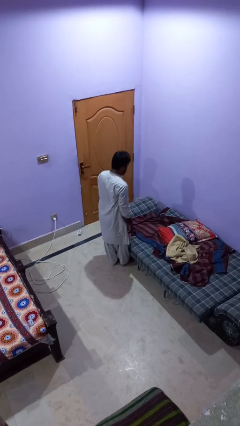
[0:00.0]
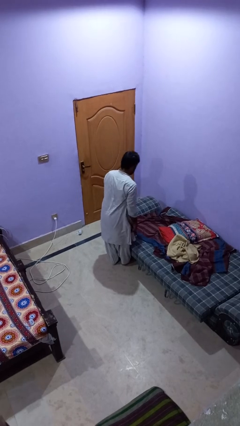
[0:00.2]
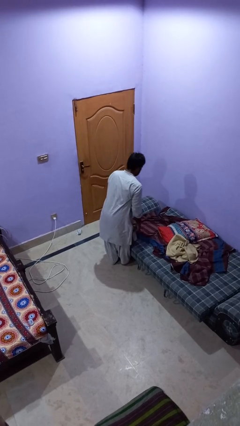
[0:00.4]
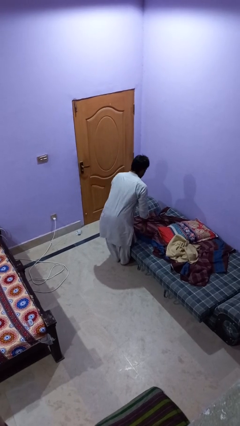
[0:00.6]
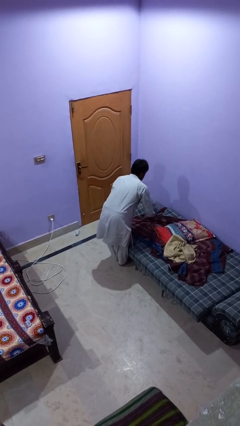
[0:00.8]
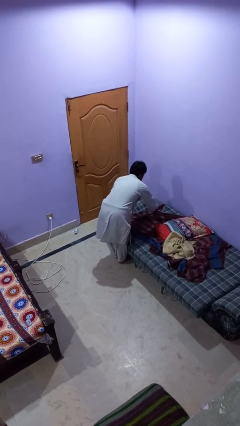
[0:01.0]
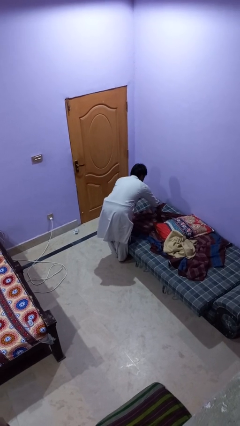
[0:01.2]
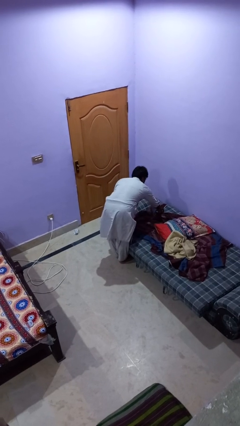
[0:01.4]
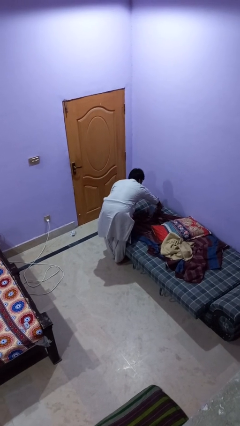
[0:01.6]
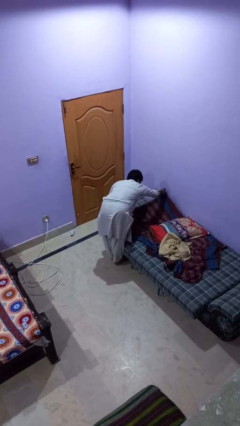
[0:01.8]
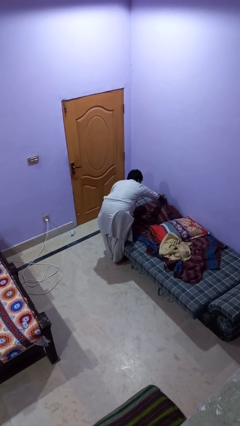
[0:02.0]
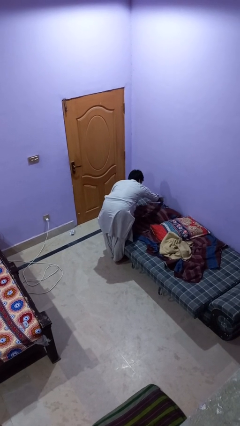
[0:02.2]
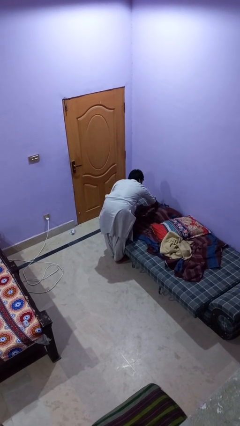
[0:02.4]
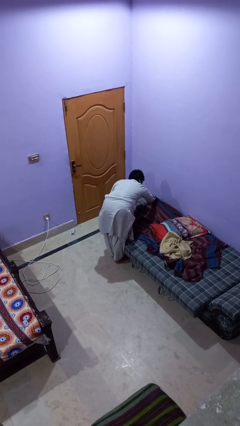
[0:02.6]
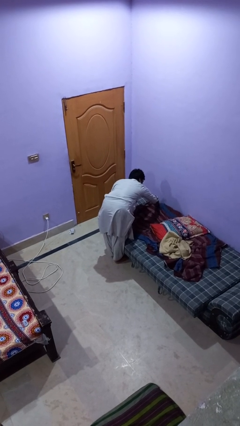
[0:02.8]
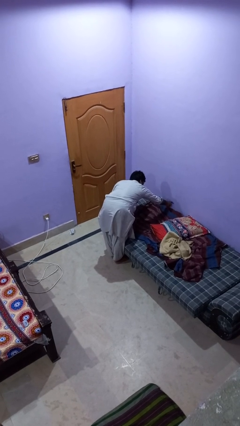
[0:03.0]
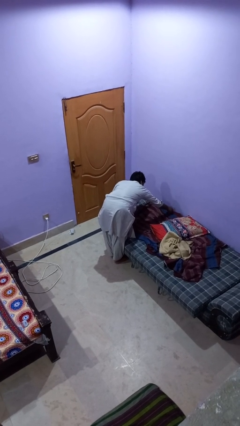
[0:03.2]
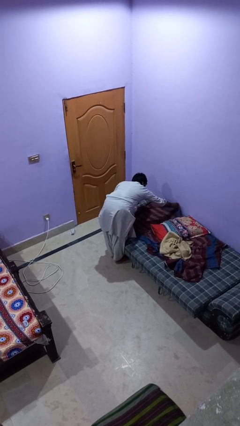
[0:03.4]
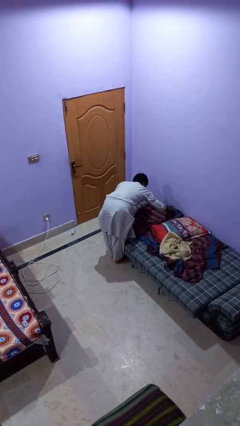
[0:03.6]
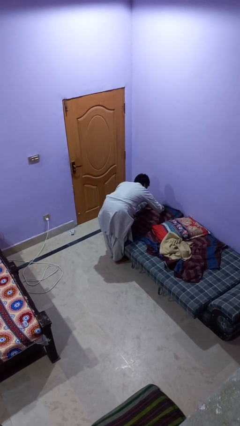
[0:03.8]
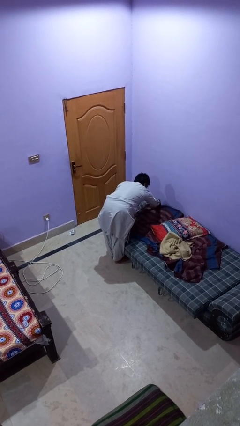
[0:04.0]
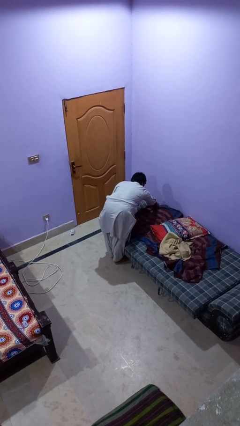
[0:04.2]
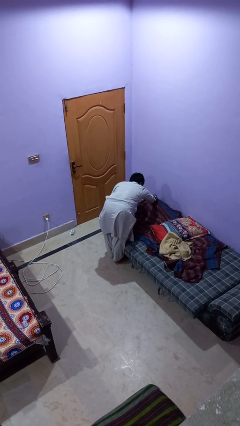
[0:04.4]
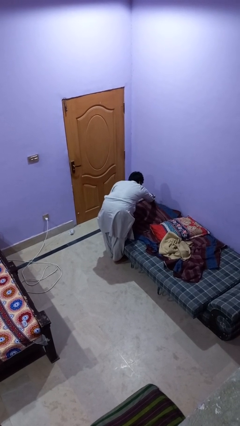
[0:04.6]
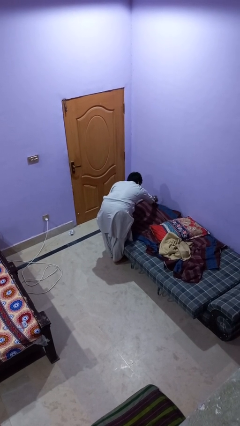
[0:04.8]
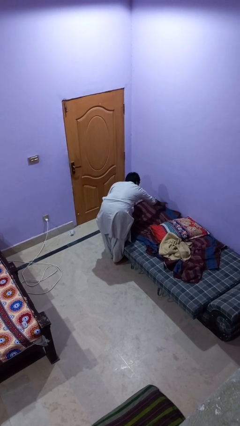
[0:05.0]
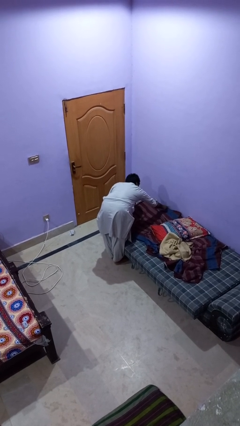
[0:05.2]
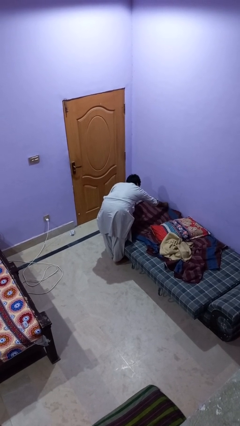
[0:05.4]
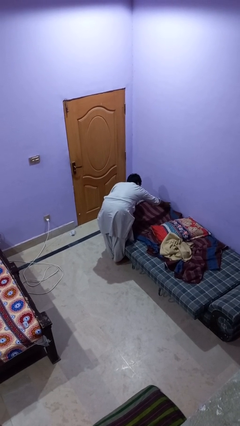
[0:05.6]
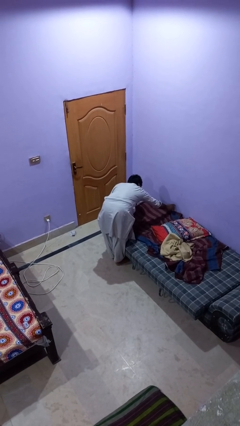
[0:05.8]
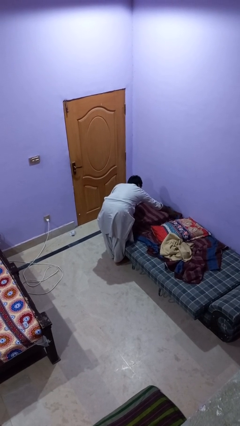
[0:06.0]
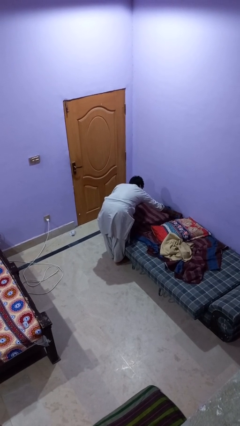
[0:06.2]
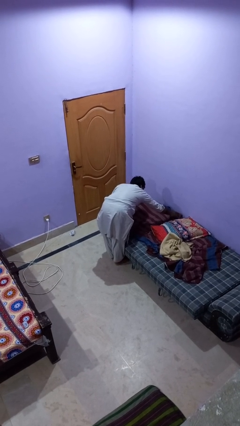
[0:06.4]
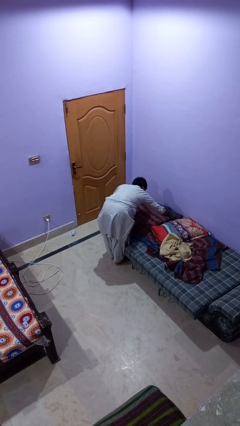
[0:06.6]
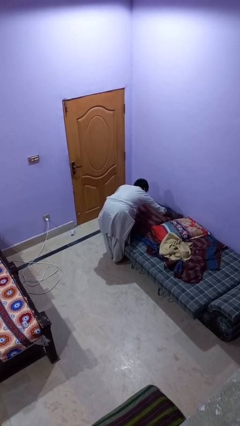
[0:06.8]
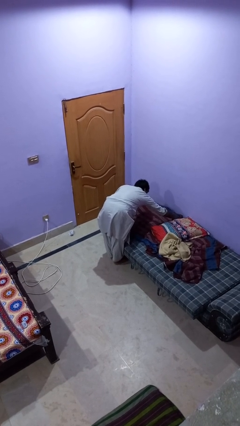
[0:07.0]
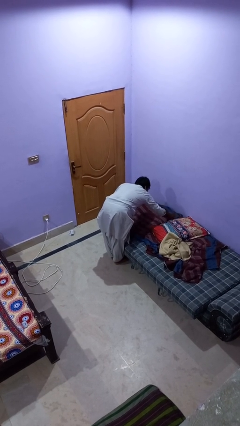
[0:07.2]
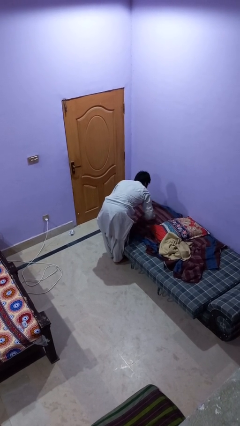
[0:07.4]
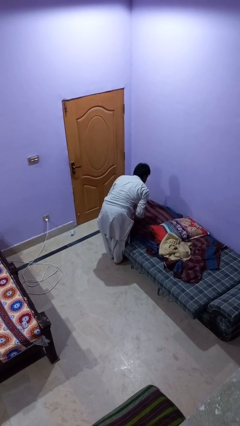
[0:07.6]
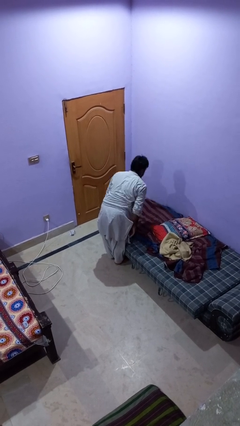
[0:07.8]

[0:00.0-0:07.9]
person makes bed

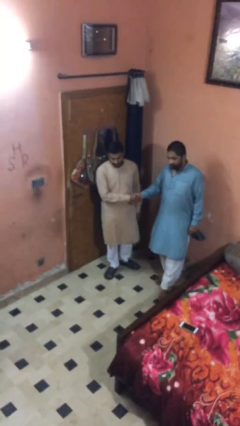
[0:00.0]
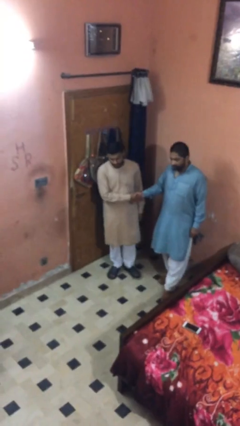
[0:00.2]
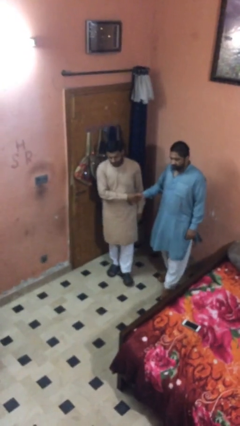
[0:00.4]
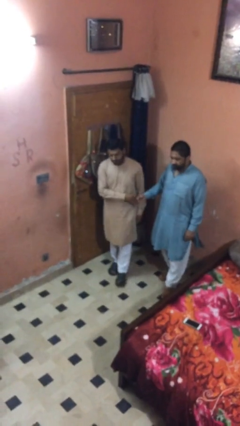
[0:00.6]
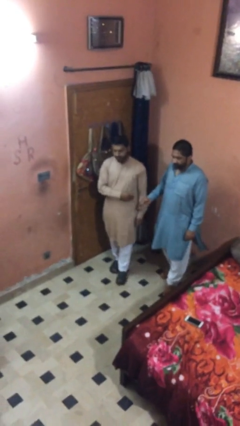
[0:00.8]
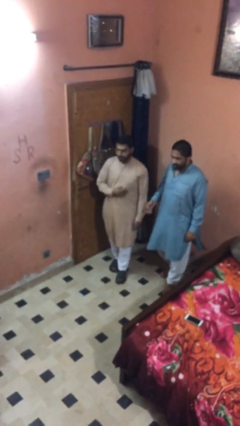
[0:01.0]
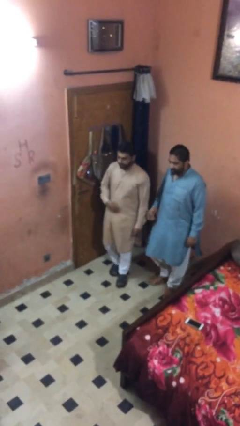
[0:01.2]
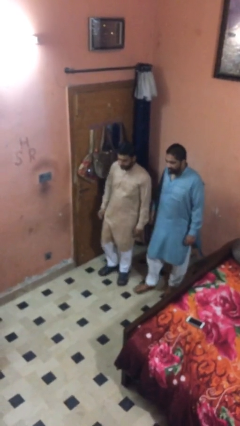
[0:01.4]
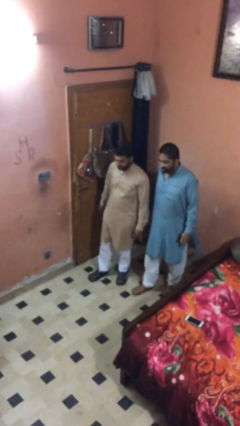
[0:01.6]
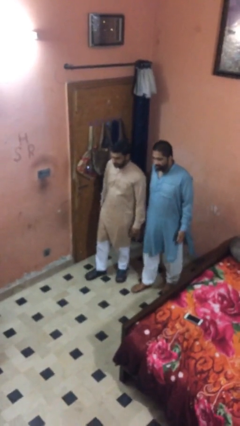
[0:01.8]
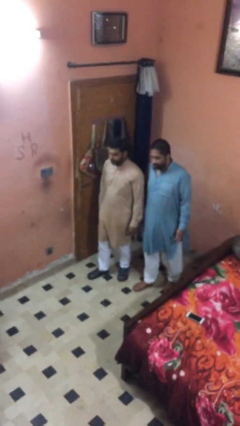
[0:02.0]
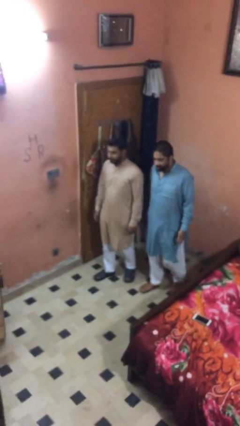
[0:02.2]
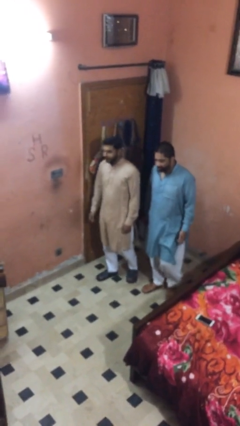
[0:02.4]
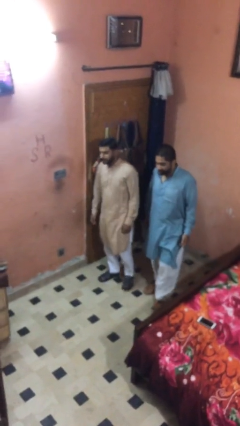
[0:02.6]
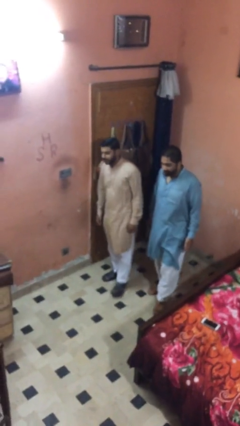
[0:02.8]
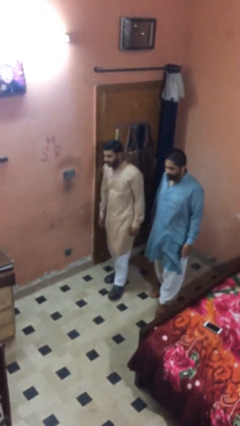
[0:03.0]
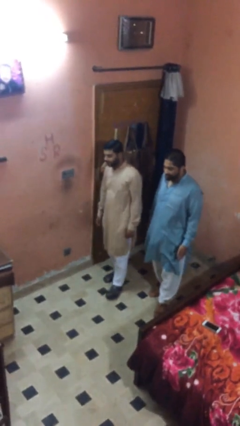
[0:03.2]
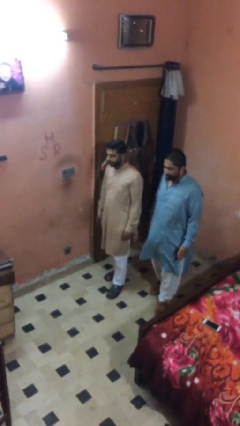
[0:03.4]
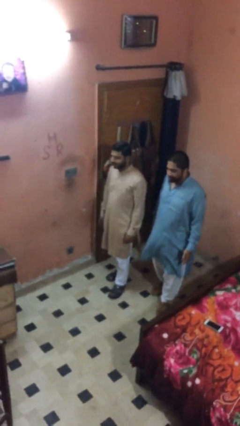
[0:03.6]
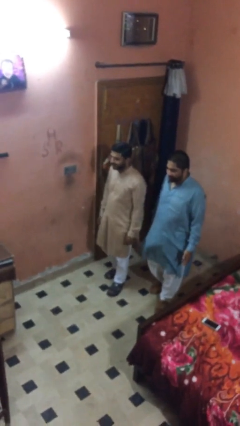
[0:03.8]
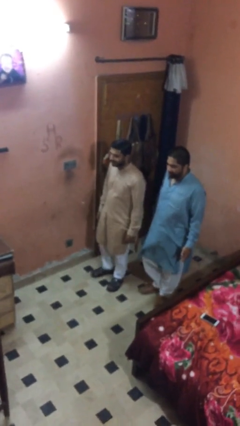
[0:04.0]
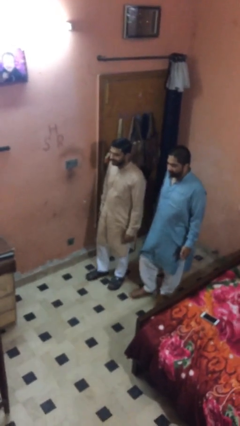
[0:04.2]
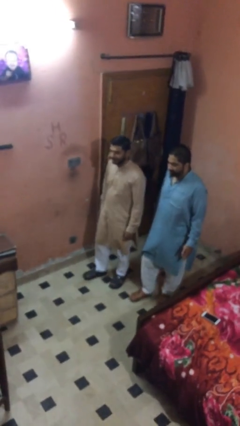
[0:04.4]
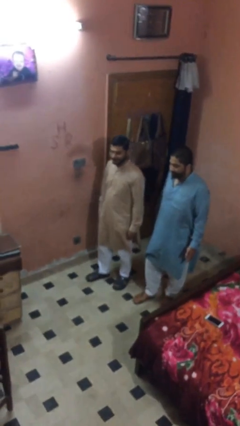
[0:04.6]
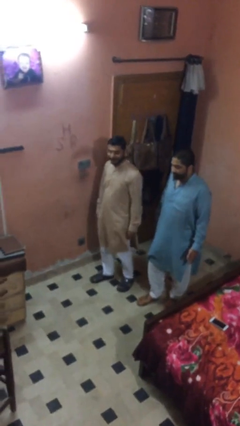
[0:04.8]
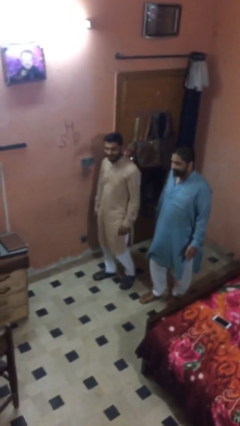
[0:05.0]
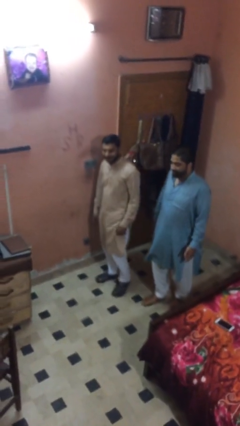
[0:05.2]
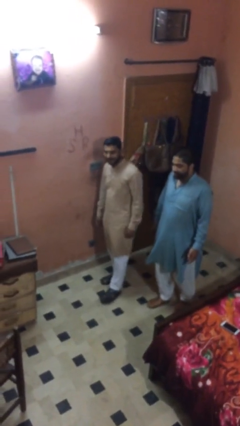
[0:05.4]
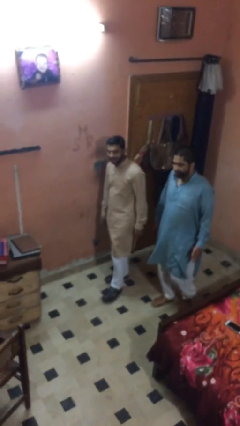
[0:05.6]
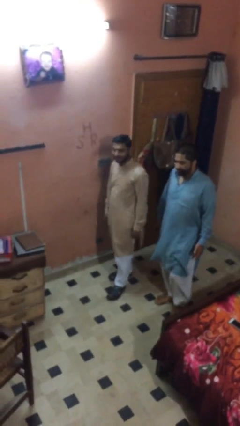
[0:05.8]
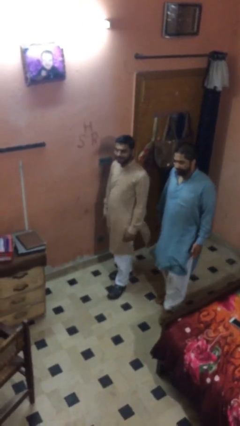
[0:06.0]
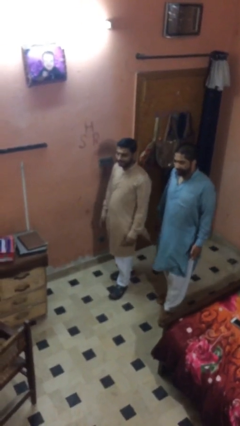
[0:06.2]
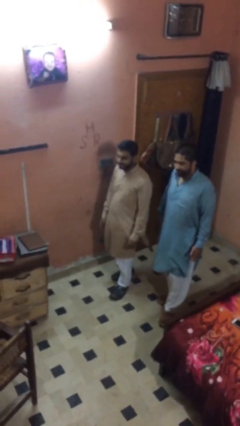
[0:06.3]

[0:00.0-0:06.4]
person talks to person

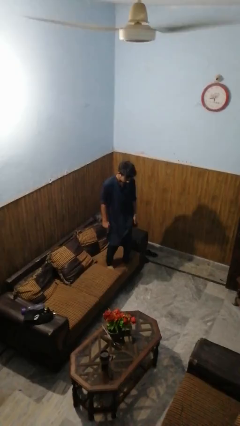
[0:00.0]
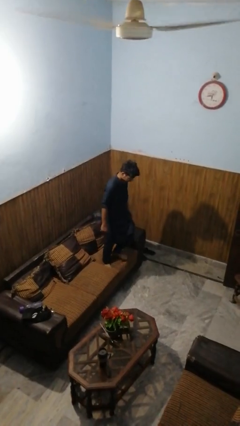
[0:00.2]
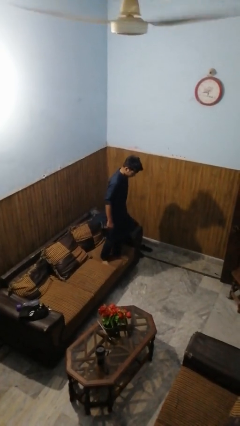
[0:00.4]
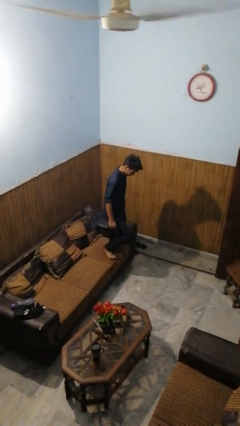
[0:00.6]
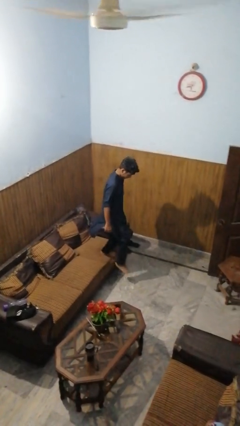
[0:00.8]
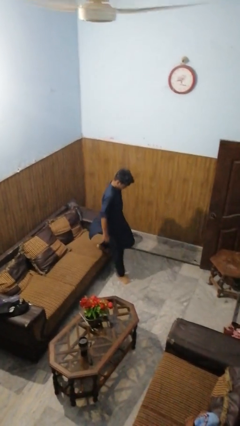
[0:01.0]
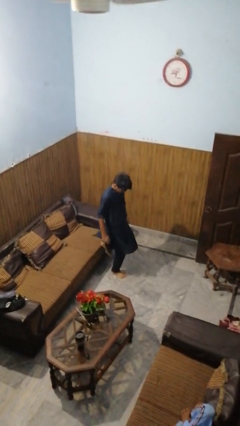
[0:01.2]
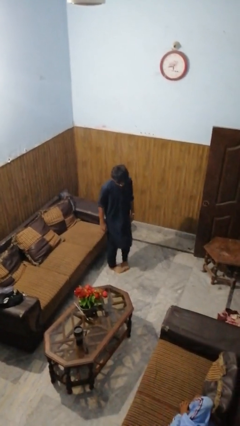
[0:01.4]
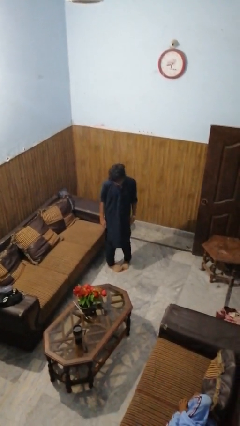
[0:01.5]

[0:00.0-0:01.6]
person climbs off couch

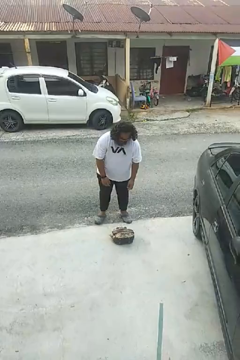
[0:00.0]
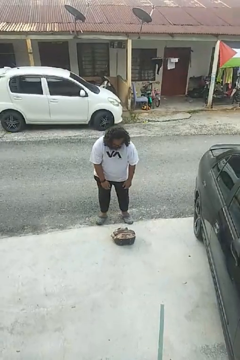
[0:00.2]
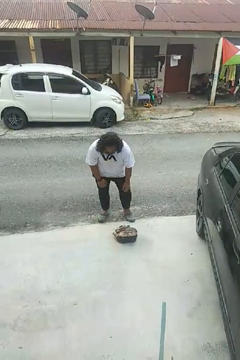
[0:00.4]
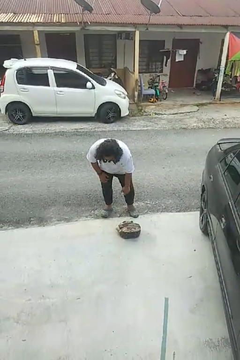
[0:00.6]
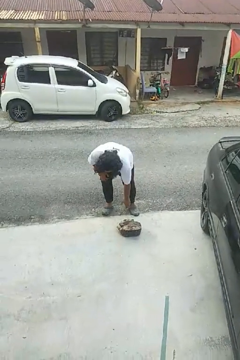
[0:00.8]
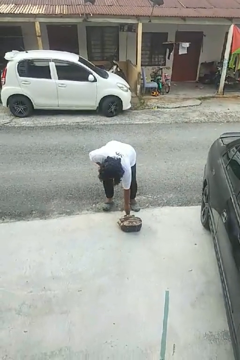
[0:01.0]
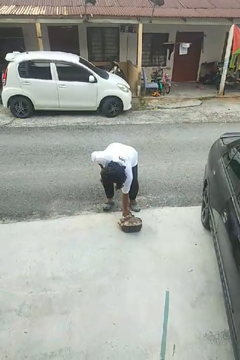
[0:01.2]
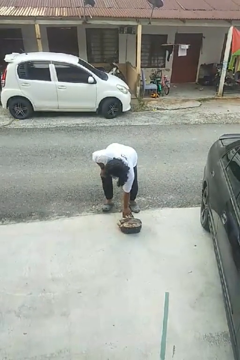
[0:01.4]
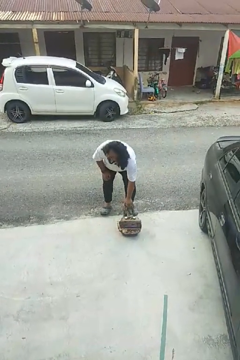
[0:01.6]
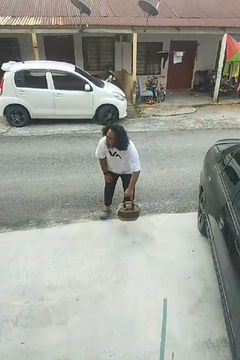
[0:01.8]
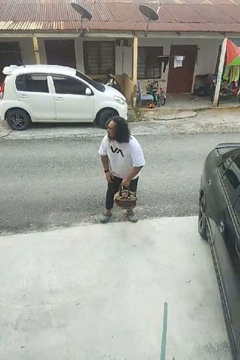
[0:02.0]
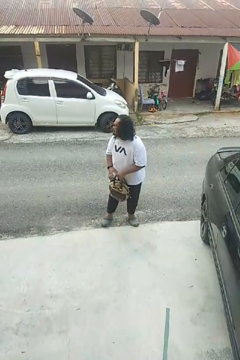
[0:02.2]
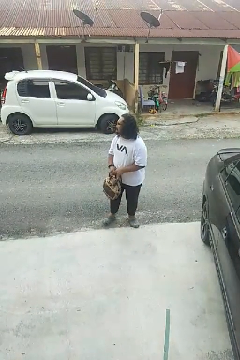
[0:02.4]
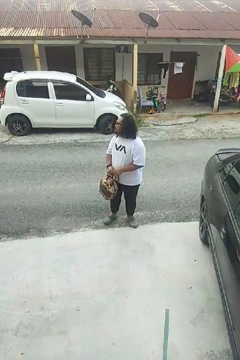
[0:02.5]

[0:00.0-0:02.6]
person picks up object from floor
